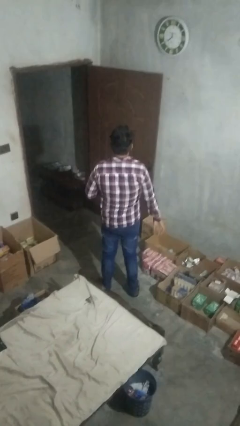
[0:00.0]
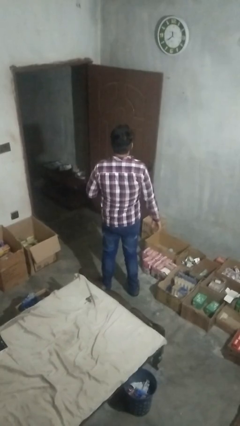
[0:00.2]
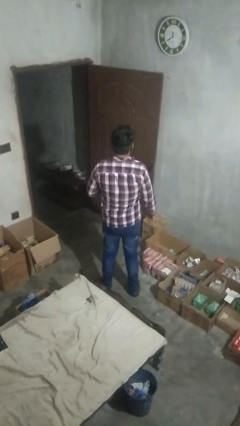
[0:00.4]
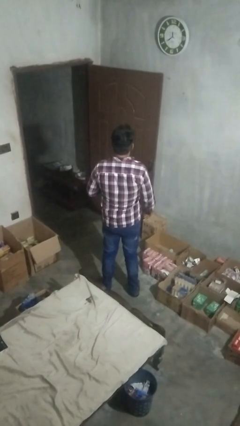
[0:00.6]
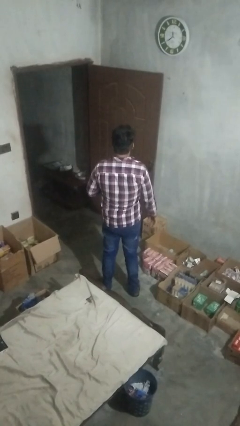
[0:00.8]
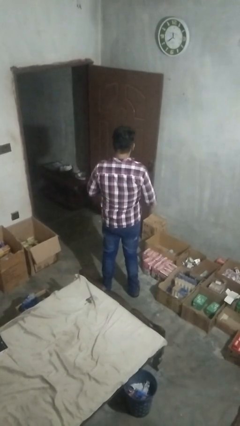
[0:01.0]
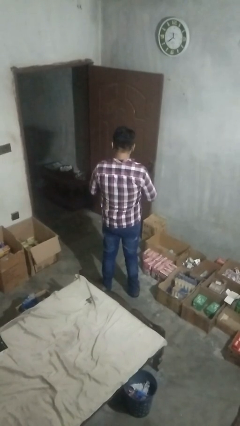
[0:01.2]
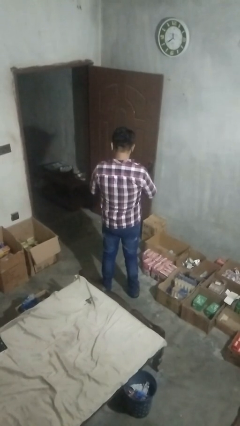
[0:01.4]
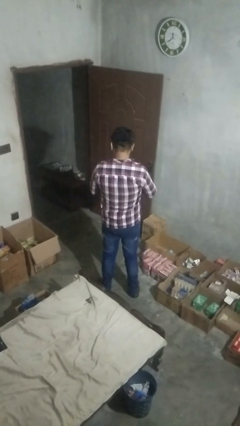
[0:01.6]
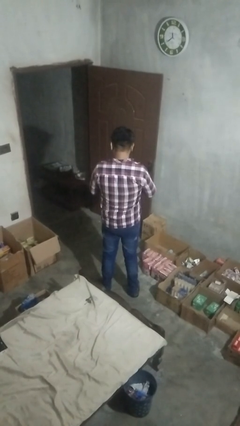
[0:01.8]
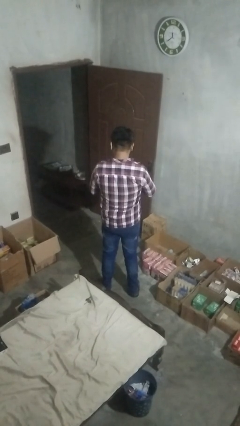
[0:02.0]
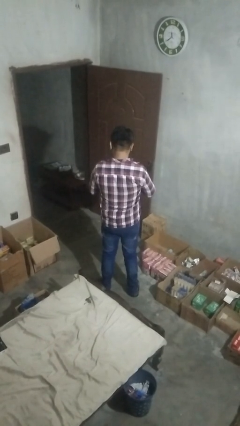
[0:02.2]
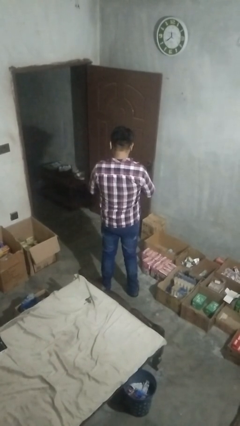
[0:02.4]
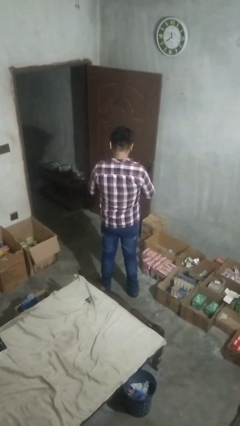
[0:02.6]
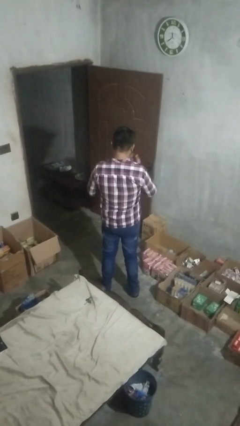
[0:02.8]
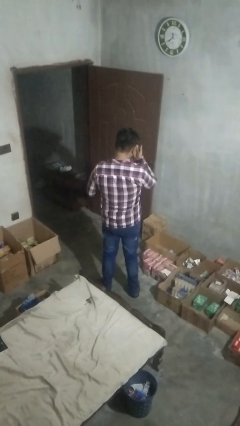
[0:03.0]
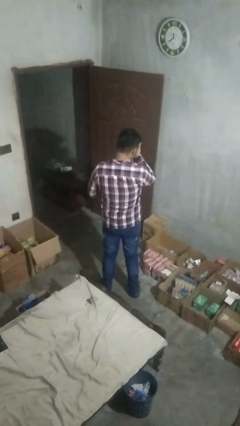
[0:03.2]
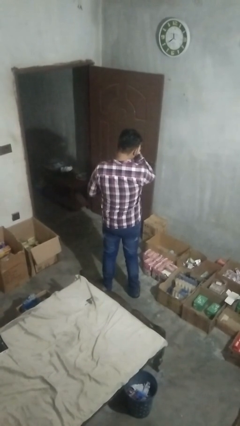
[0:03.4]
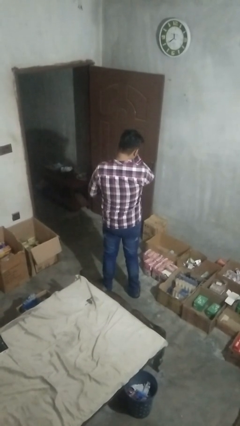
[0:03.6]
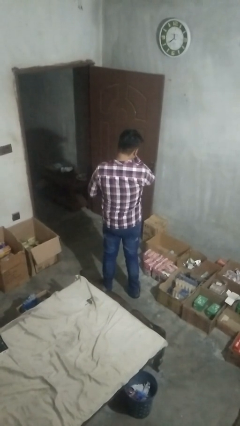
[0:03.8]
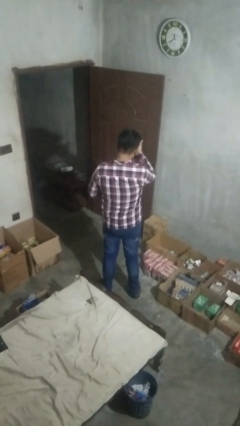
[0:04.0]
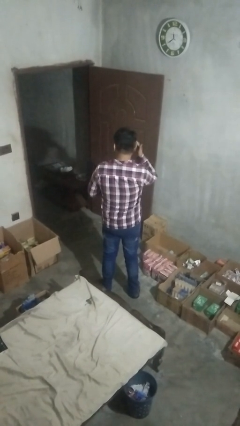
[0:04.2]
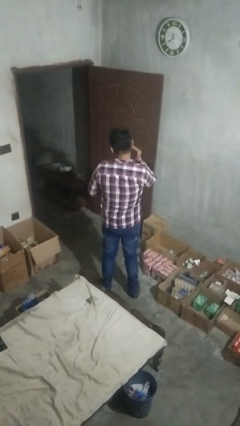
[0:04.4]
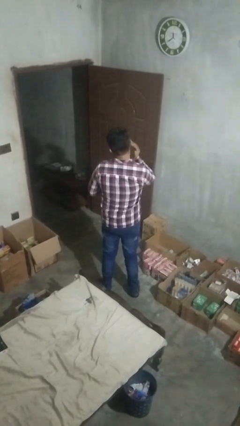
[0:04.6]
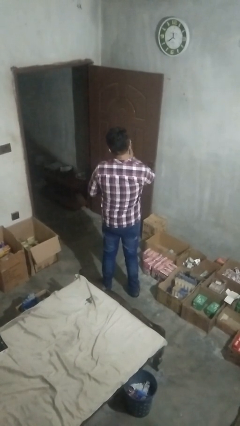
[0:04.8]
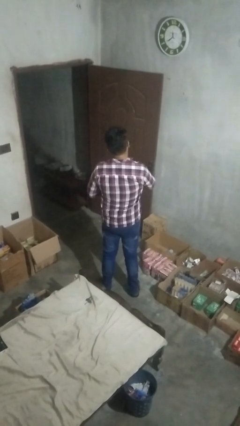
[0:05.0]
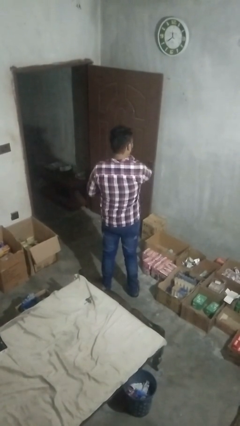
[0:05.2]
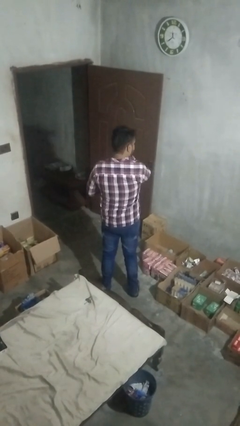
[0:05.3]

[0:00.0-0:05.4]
person applies facial moisturizer

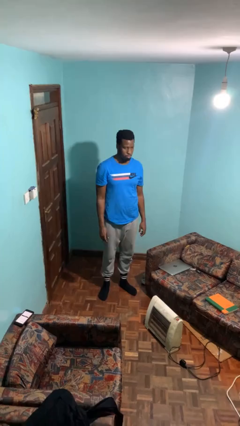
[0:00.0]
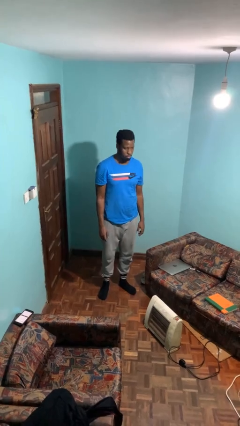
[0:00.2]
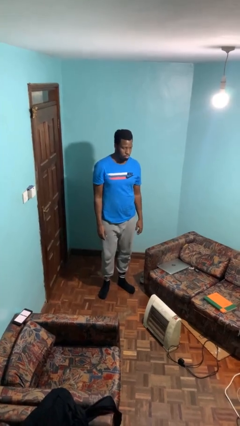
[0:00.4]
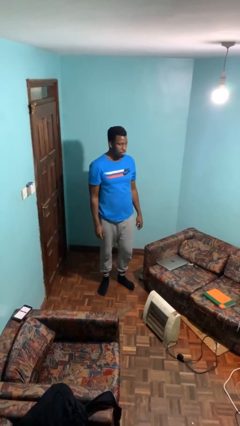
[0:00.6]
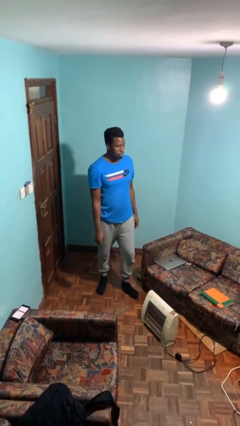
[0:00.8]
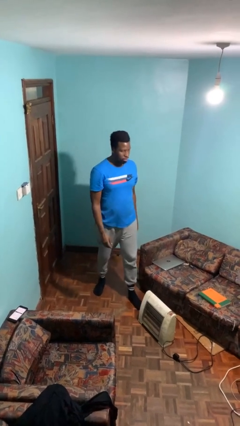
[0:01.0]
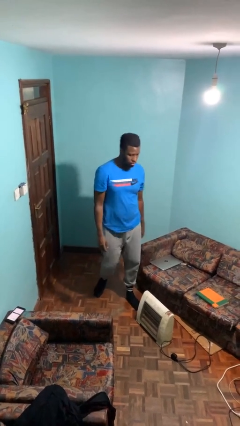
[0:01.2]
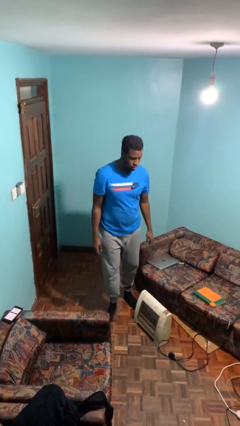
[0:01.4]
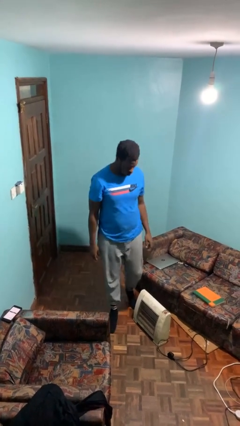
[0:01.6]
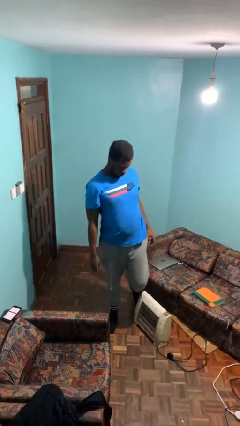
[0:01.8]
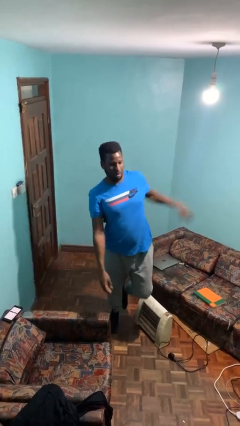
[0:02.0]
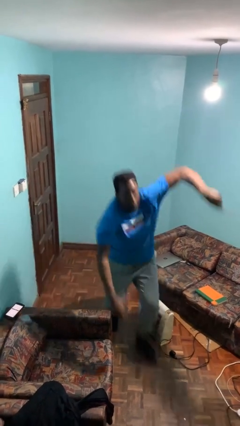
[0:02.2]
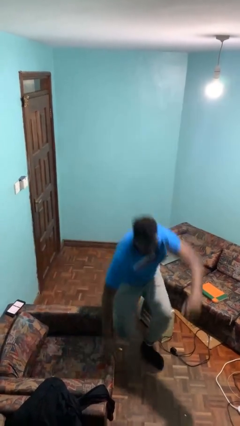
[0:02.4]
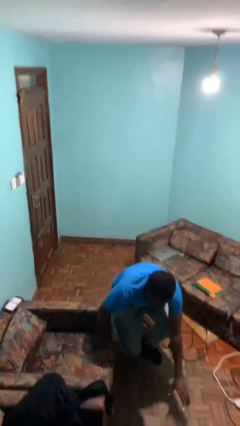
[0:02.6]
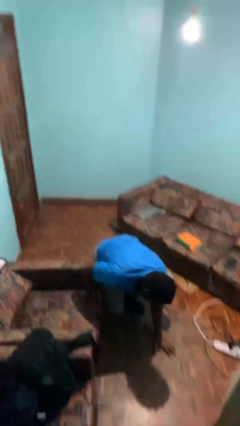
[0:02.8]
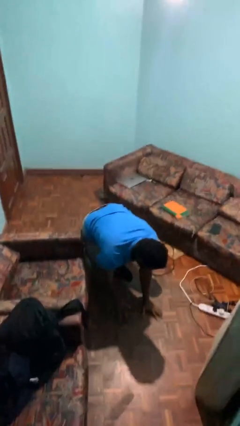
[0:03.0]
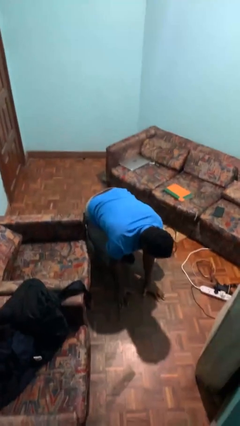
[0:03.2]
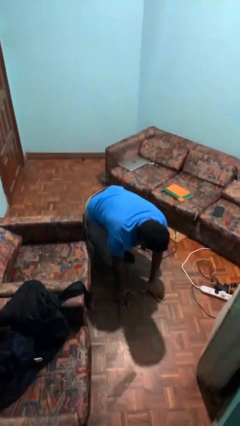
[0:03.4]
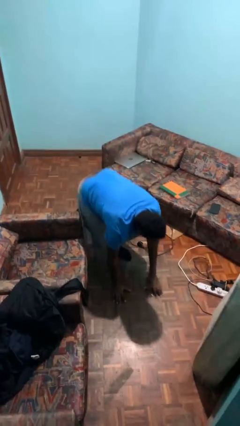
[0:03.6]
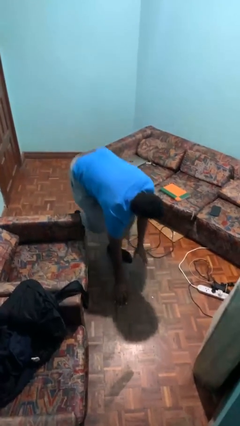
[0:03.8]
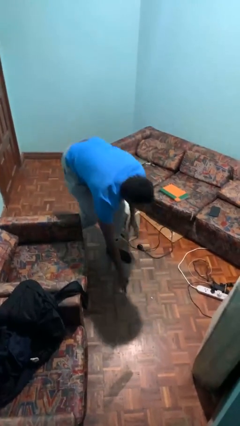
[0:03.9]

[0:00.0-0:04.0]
person trips on object on floor

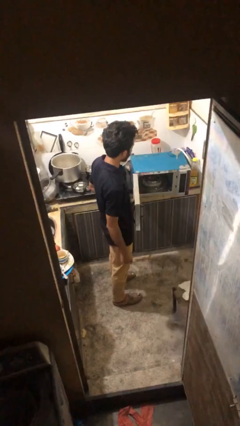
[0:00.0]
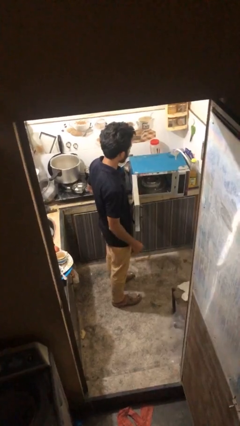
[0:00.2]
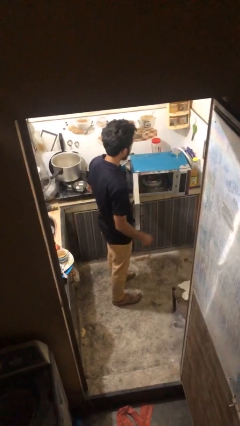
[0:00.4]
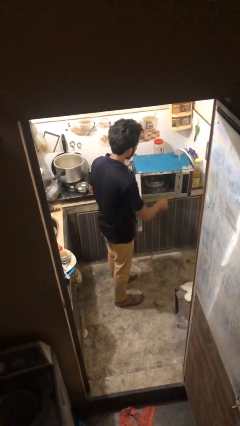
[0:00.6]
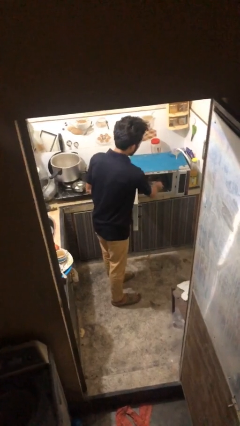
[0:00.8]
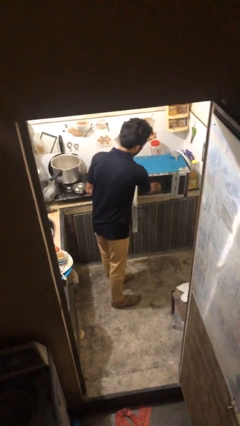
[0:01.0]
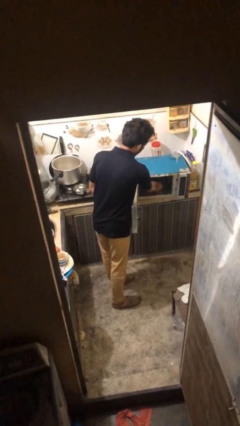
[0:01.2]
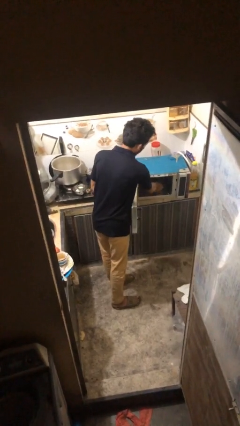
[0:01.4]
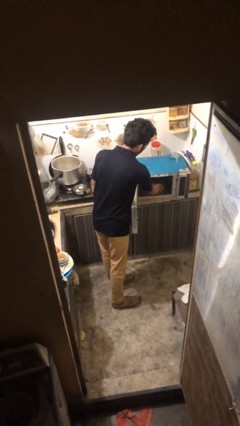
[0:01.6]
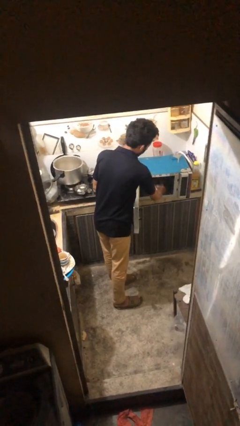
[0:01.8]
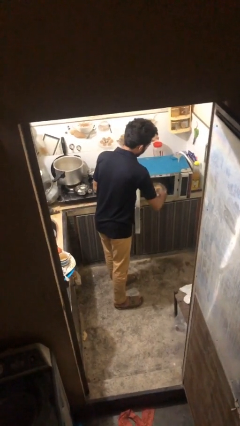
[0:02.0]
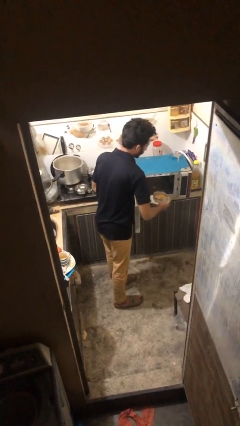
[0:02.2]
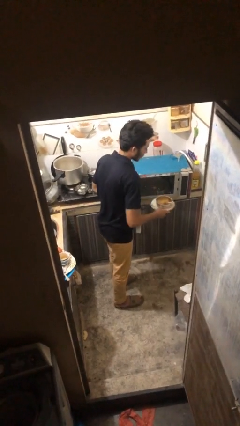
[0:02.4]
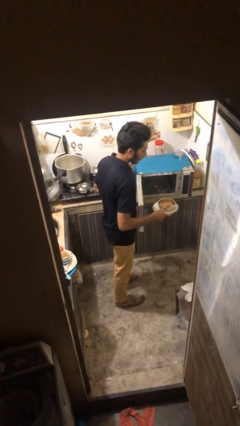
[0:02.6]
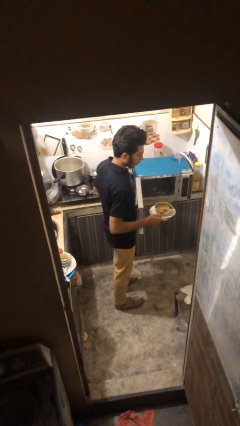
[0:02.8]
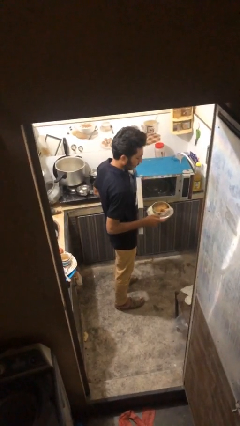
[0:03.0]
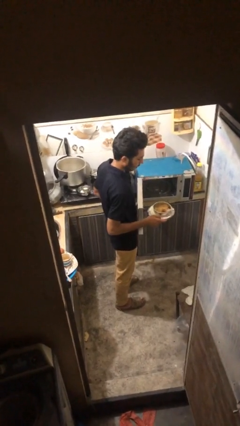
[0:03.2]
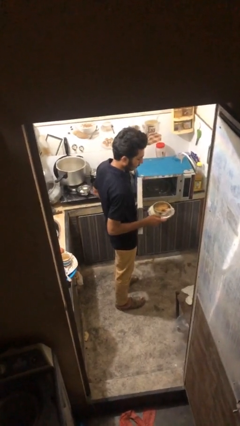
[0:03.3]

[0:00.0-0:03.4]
person takes object from microwave

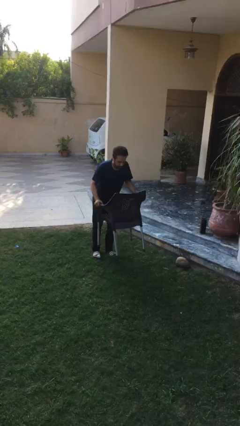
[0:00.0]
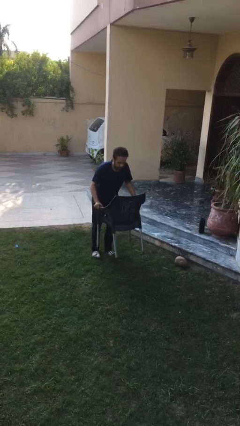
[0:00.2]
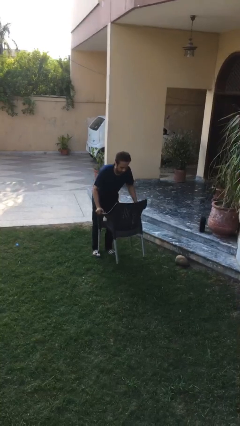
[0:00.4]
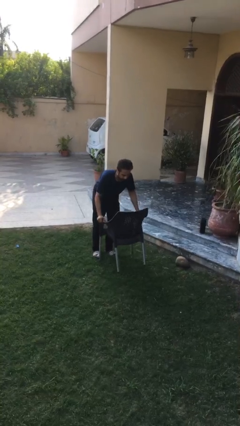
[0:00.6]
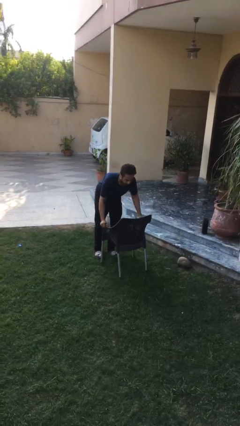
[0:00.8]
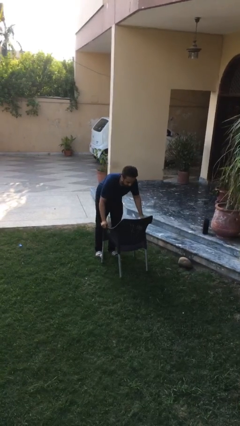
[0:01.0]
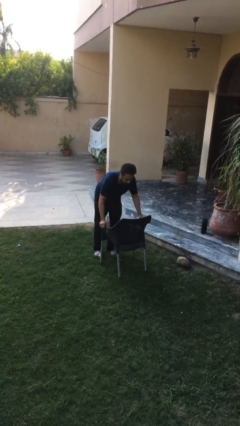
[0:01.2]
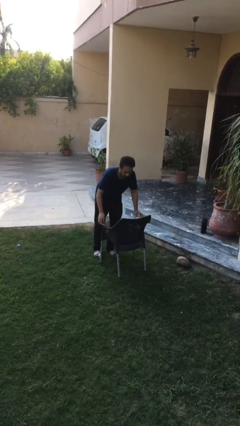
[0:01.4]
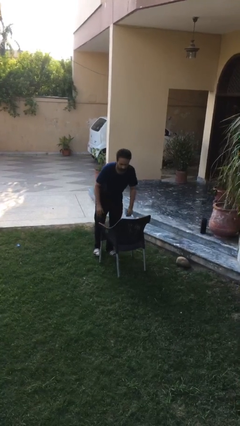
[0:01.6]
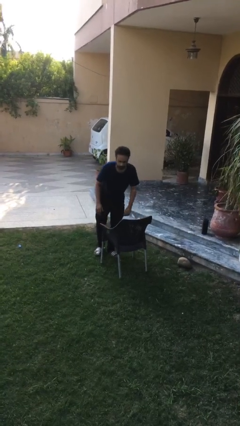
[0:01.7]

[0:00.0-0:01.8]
person puts down object on floor

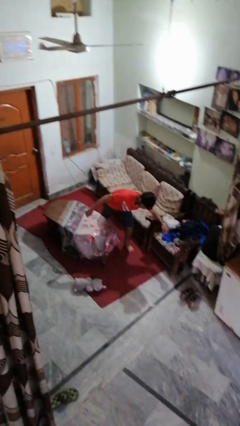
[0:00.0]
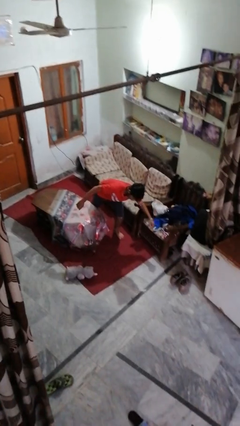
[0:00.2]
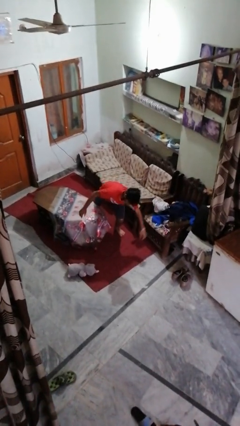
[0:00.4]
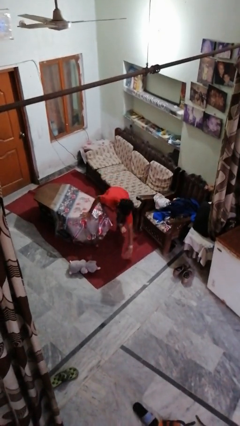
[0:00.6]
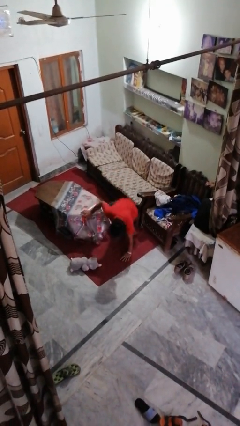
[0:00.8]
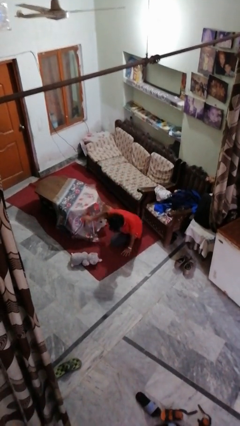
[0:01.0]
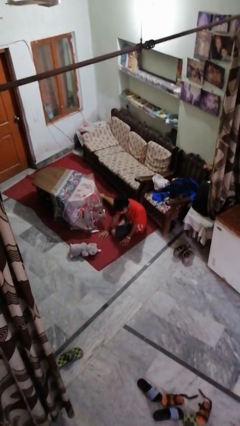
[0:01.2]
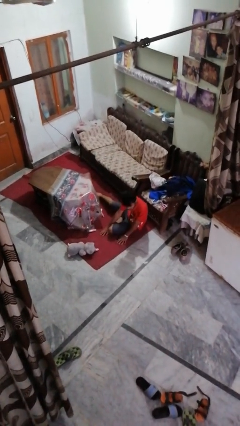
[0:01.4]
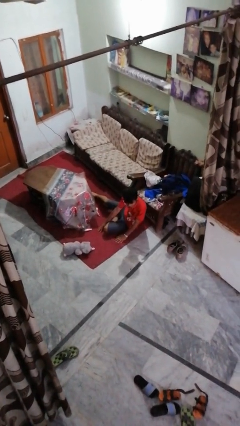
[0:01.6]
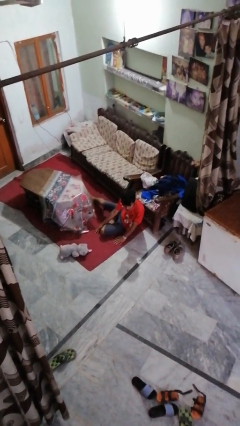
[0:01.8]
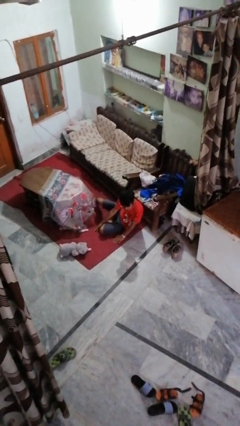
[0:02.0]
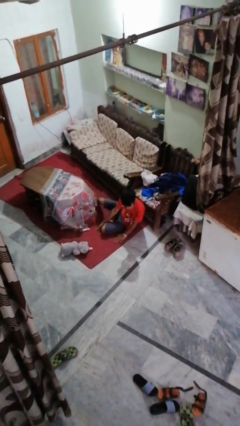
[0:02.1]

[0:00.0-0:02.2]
person lies down on floor

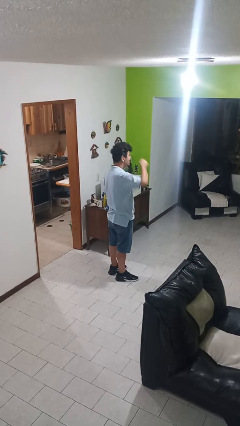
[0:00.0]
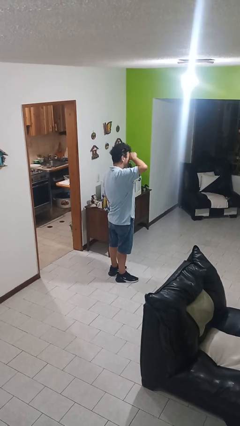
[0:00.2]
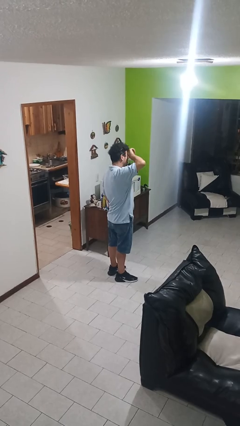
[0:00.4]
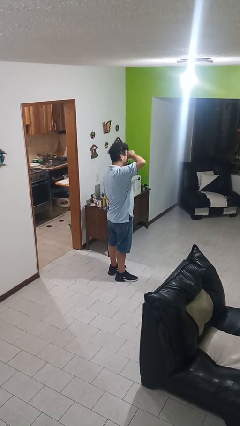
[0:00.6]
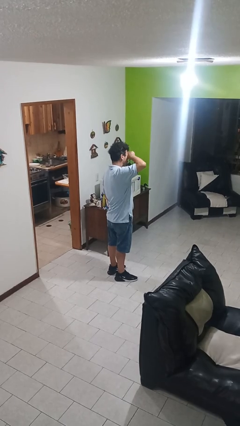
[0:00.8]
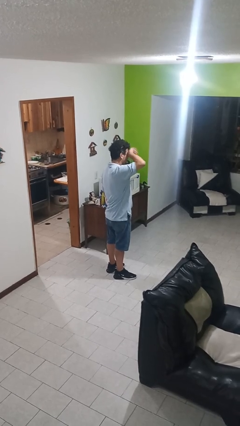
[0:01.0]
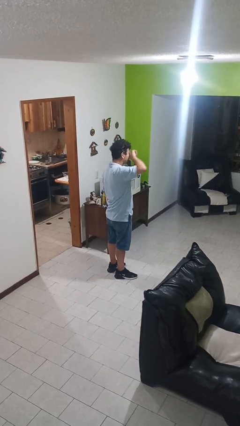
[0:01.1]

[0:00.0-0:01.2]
person rubs eyes
